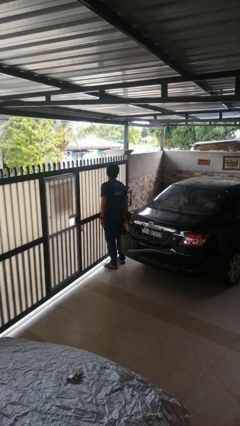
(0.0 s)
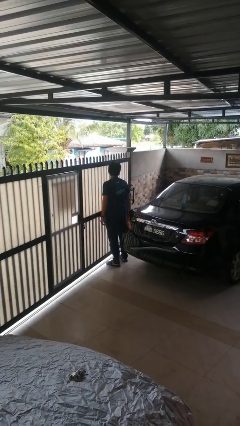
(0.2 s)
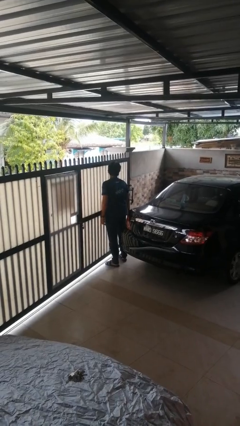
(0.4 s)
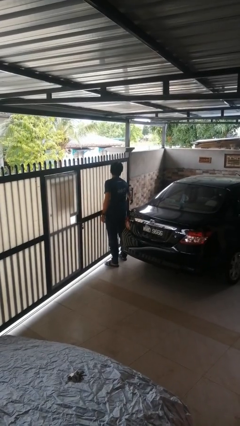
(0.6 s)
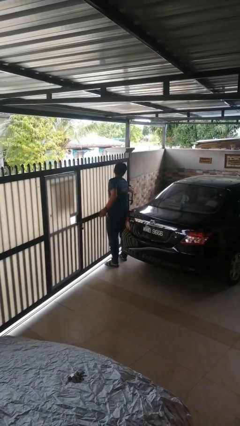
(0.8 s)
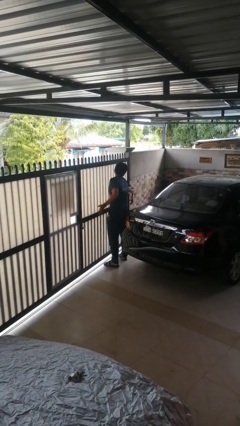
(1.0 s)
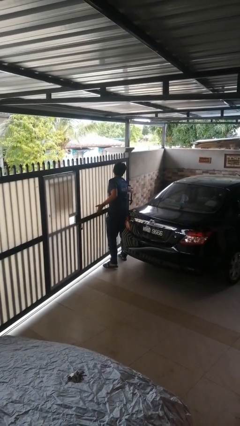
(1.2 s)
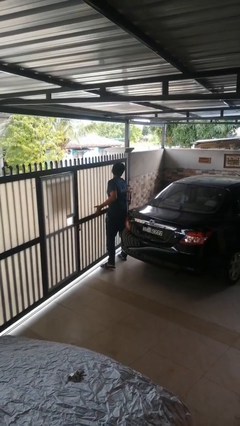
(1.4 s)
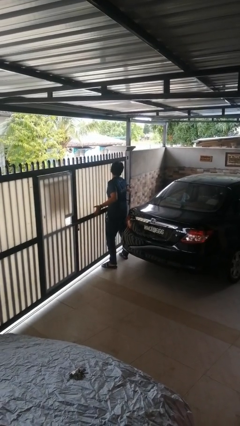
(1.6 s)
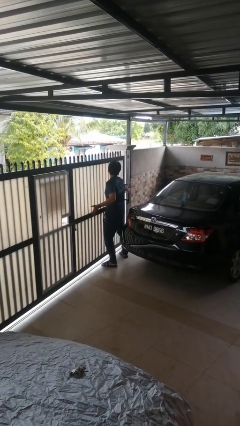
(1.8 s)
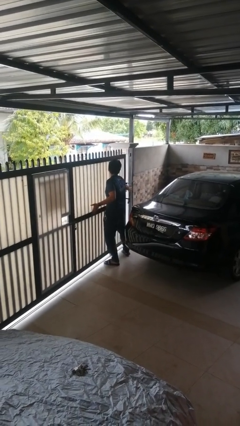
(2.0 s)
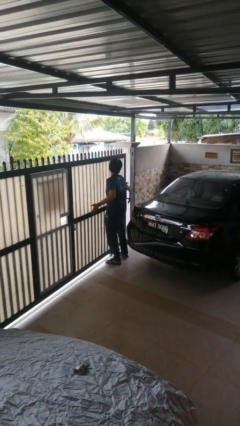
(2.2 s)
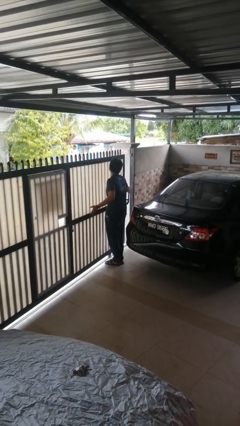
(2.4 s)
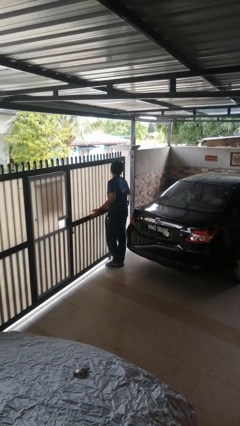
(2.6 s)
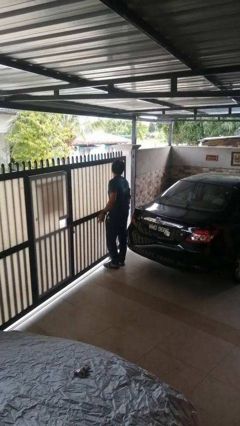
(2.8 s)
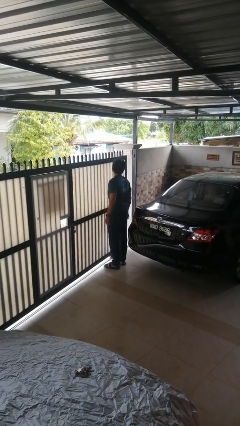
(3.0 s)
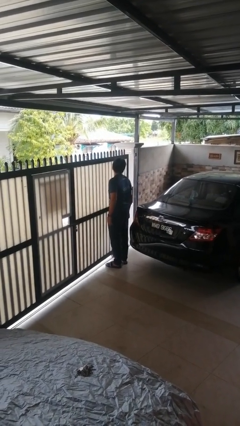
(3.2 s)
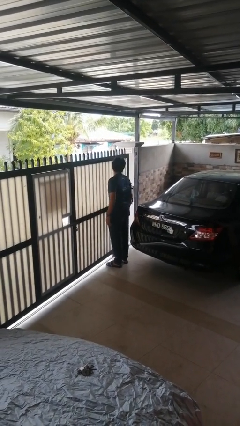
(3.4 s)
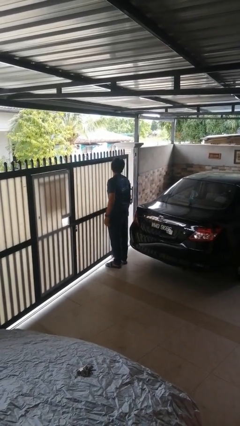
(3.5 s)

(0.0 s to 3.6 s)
person opens sliding door

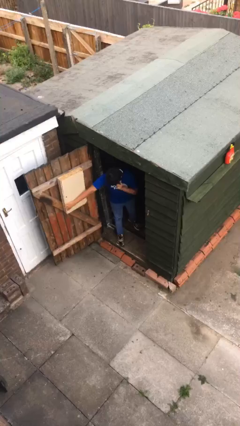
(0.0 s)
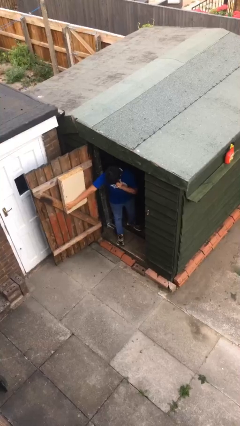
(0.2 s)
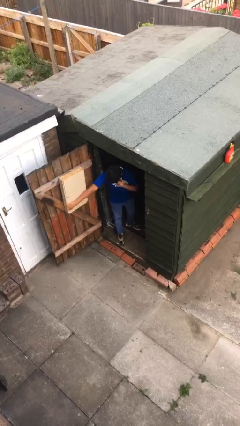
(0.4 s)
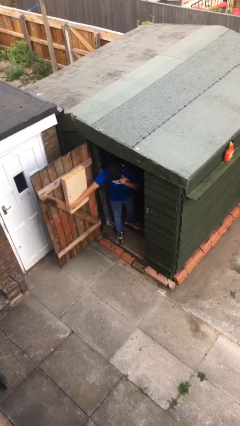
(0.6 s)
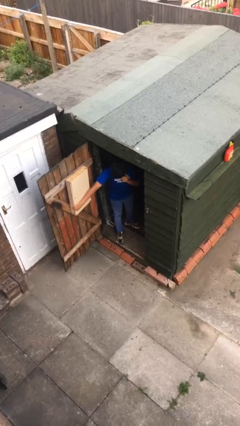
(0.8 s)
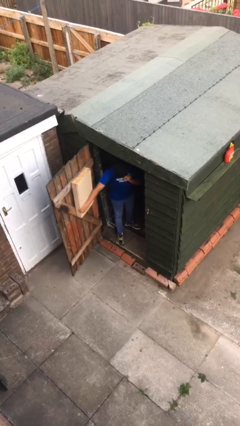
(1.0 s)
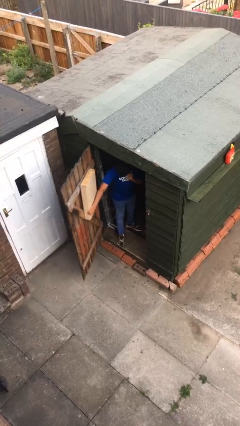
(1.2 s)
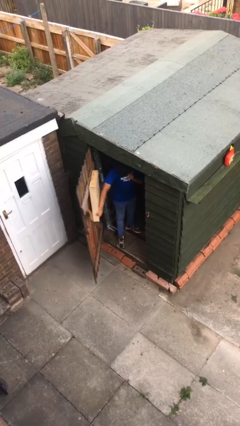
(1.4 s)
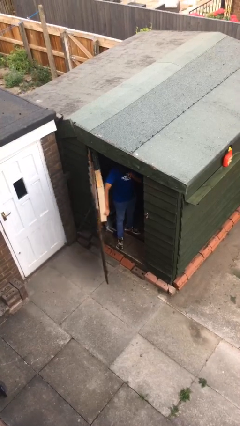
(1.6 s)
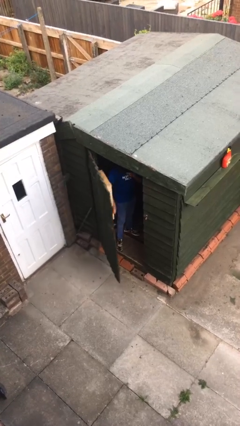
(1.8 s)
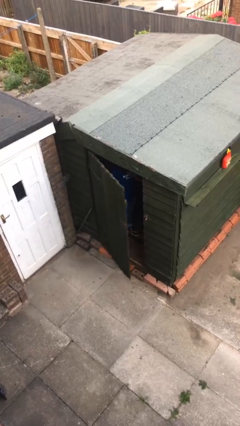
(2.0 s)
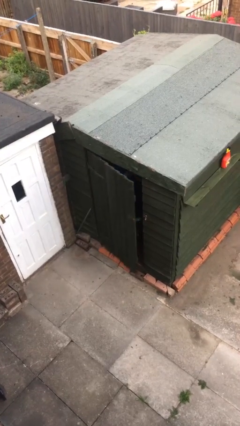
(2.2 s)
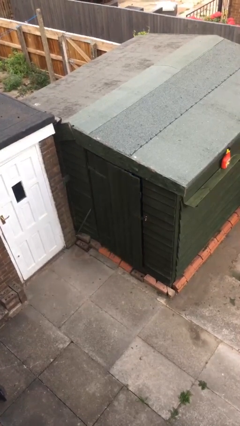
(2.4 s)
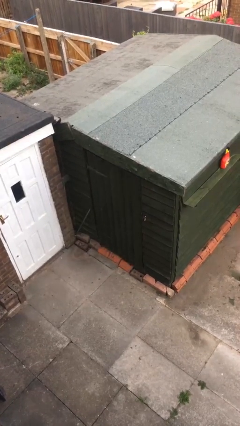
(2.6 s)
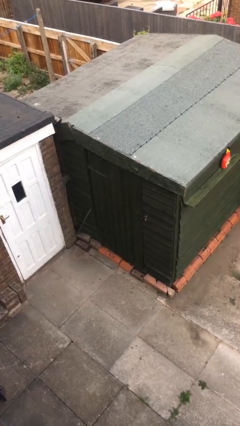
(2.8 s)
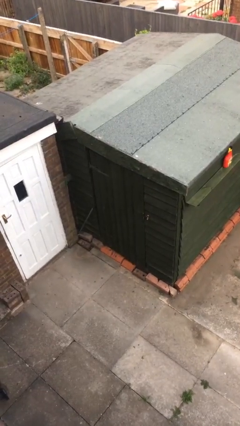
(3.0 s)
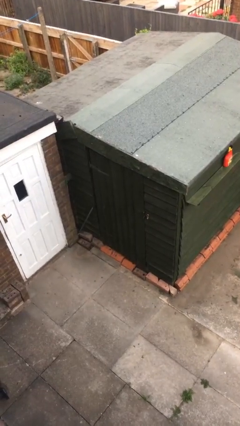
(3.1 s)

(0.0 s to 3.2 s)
person closes facility door

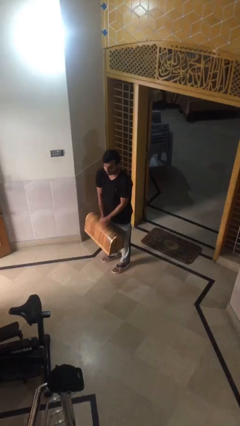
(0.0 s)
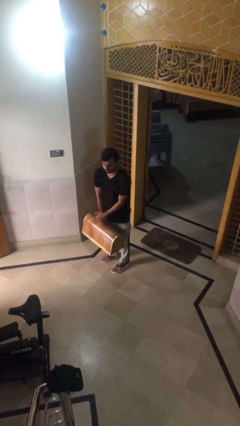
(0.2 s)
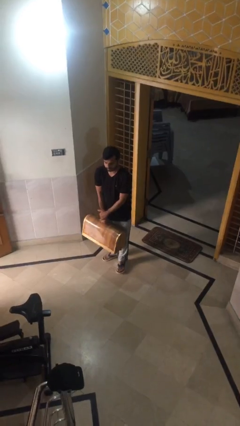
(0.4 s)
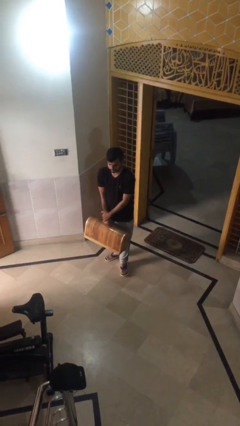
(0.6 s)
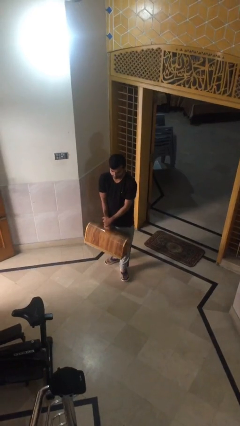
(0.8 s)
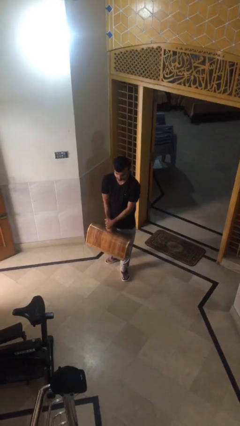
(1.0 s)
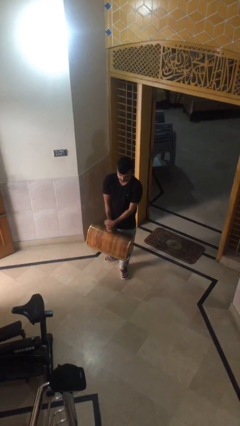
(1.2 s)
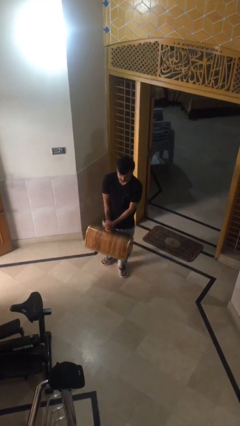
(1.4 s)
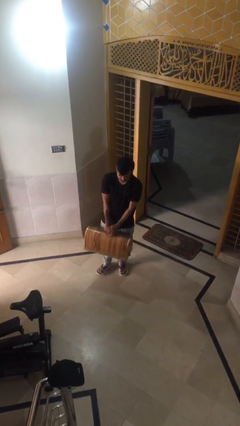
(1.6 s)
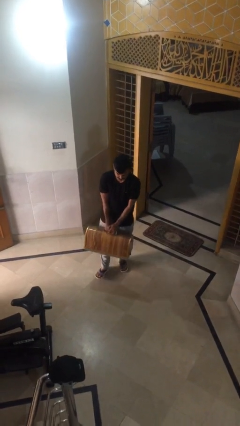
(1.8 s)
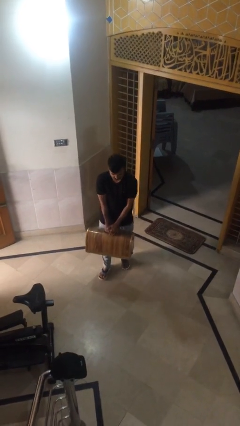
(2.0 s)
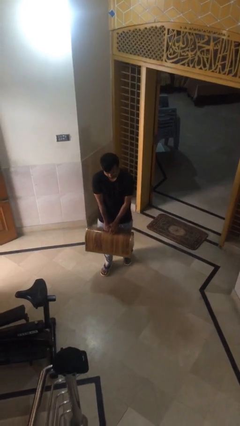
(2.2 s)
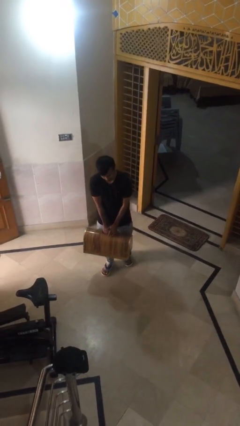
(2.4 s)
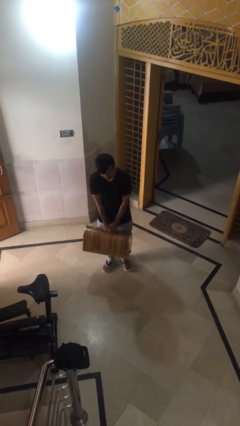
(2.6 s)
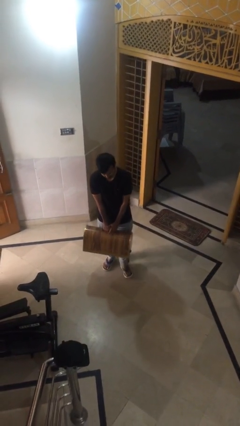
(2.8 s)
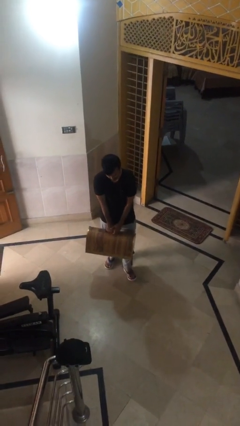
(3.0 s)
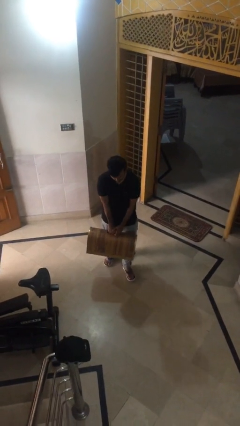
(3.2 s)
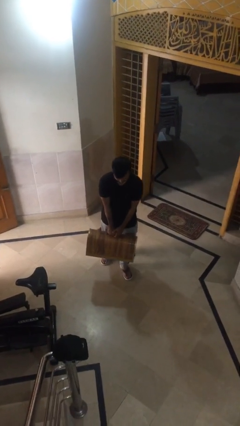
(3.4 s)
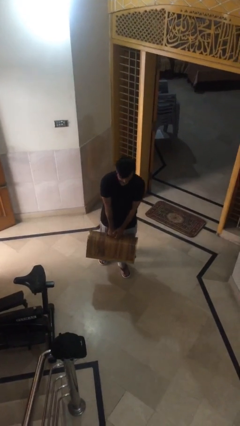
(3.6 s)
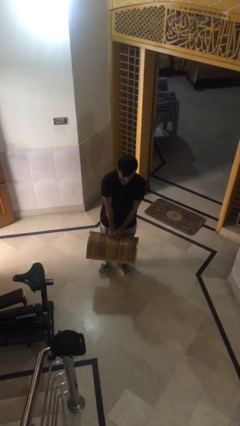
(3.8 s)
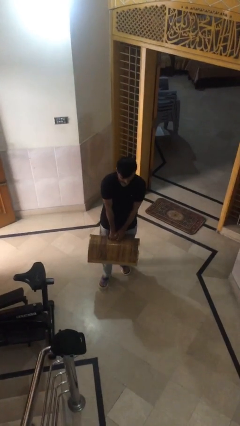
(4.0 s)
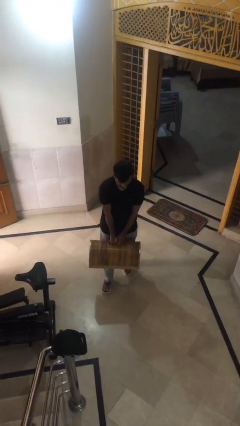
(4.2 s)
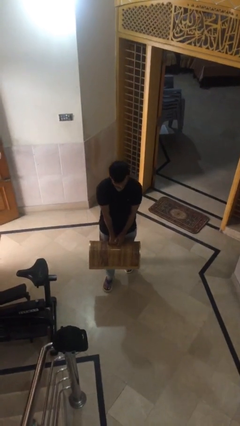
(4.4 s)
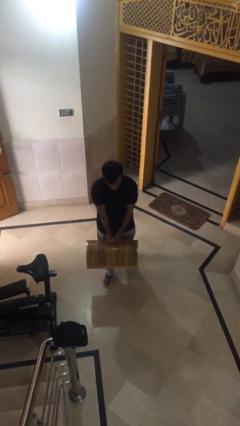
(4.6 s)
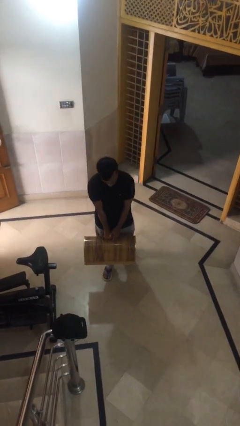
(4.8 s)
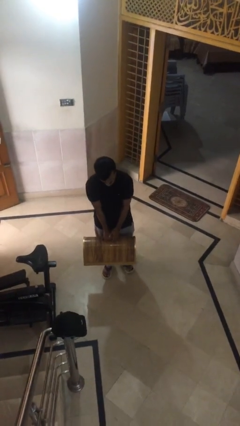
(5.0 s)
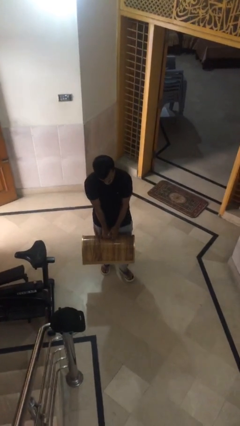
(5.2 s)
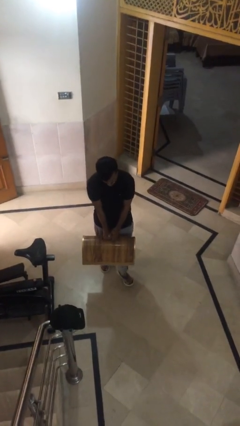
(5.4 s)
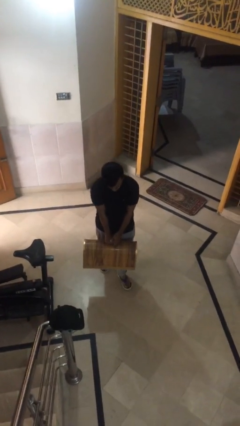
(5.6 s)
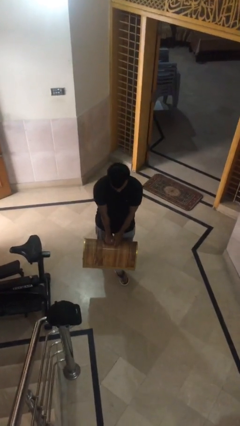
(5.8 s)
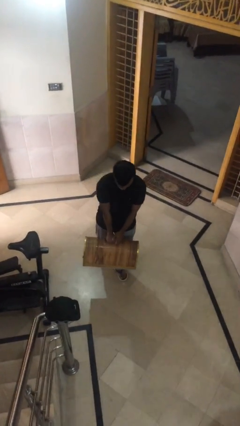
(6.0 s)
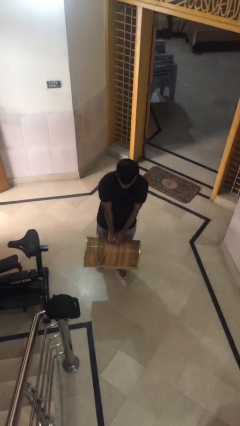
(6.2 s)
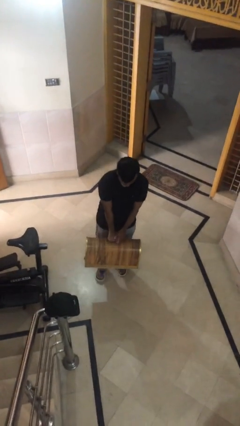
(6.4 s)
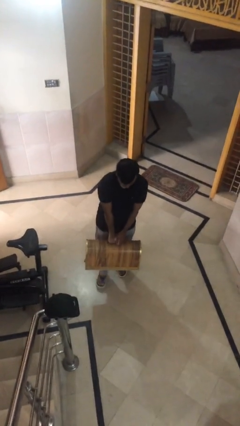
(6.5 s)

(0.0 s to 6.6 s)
person carries heavy object

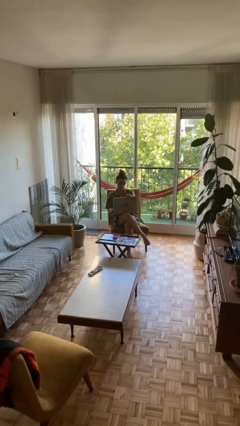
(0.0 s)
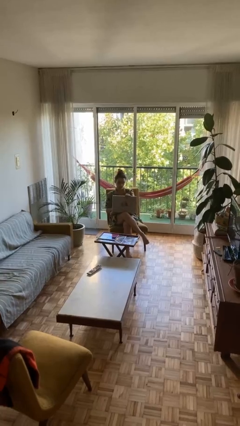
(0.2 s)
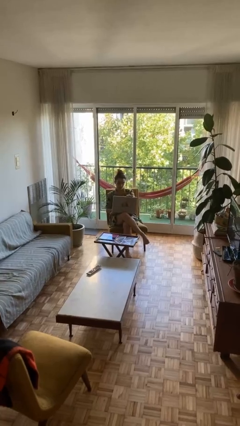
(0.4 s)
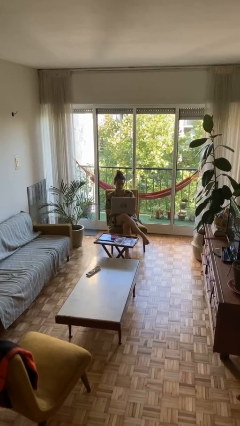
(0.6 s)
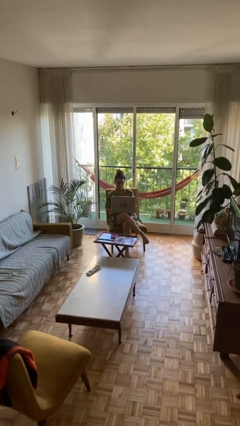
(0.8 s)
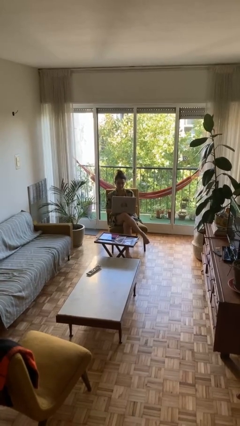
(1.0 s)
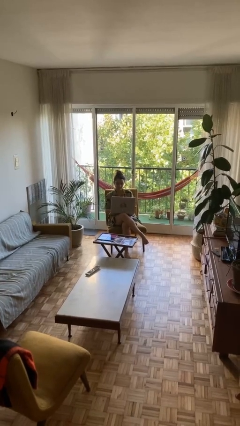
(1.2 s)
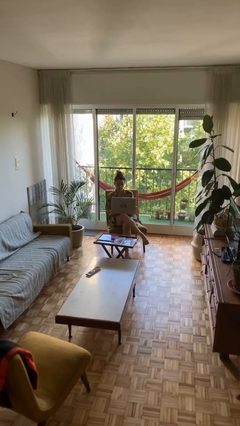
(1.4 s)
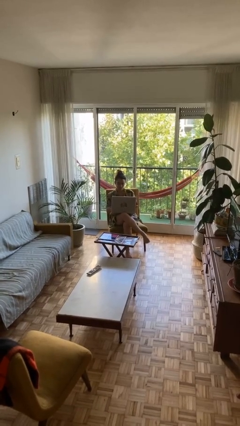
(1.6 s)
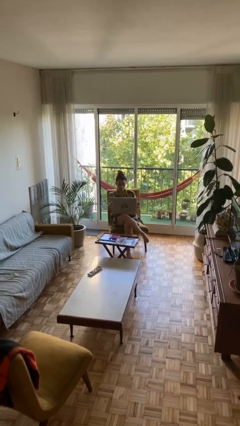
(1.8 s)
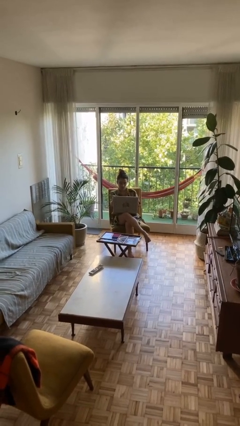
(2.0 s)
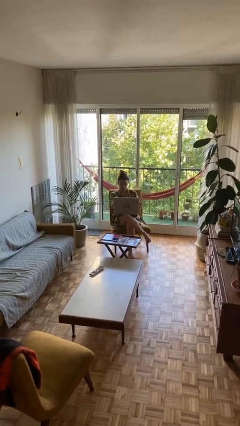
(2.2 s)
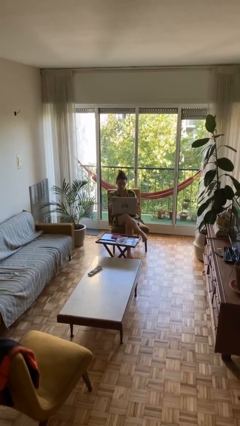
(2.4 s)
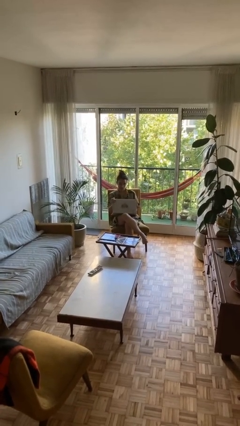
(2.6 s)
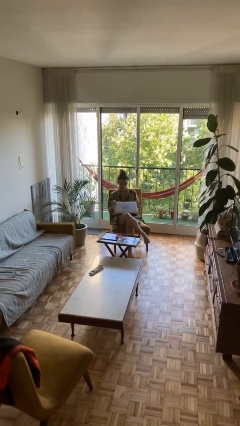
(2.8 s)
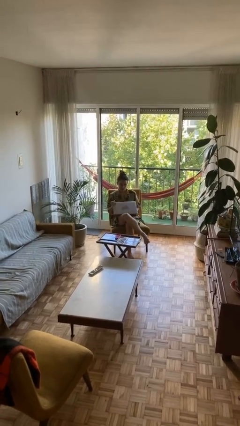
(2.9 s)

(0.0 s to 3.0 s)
person interacts with laptop

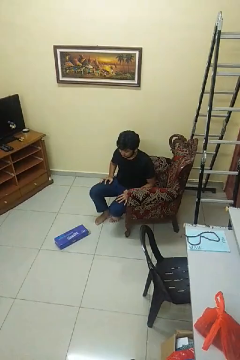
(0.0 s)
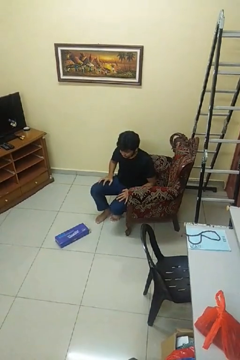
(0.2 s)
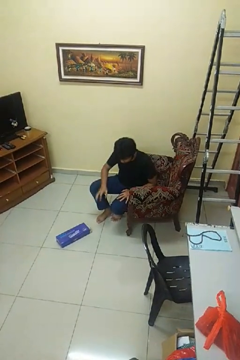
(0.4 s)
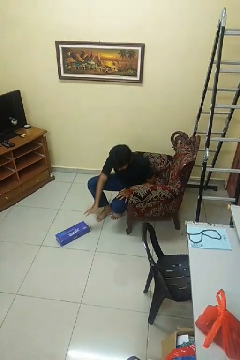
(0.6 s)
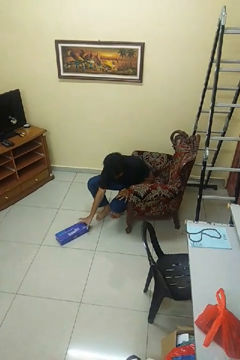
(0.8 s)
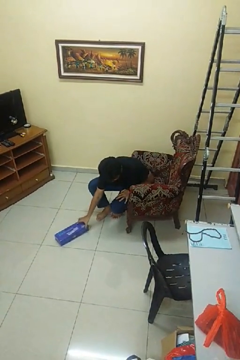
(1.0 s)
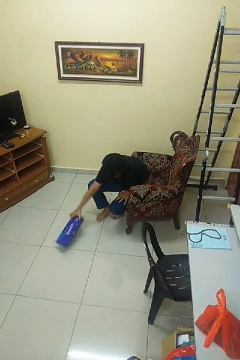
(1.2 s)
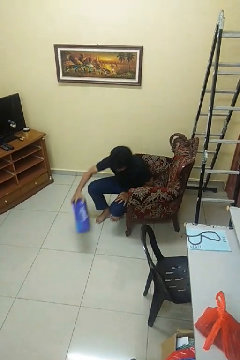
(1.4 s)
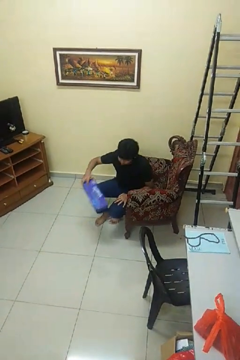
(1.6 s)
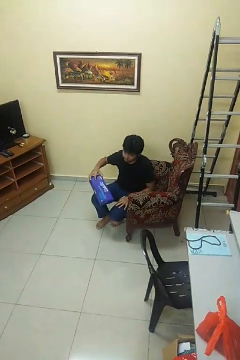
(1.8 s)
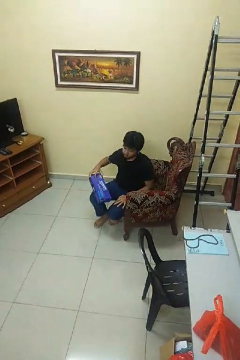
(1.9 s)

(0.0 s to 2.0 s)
person picks up object from floor
